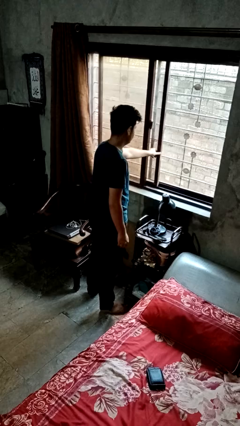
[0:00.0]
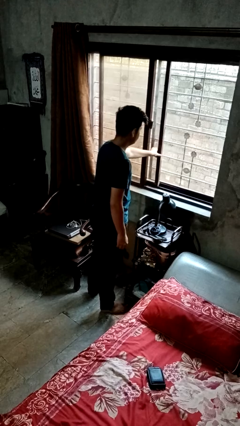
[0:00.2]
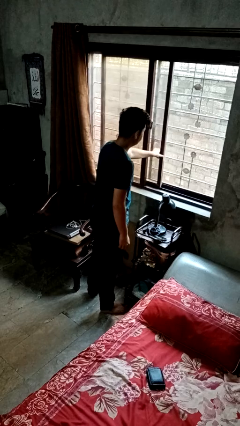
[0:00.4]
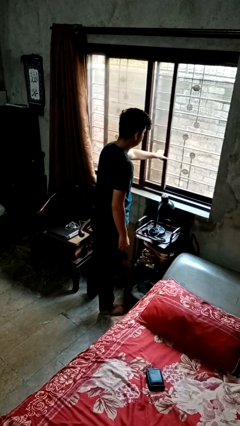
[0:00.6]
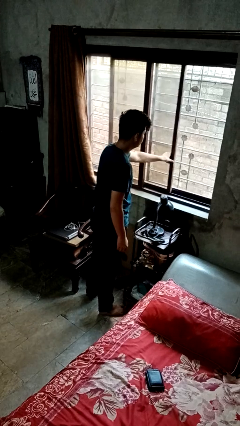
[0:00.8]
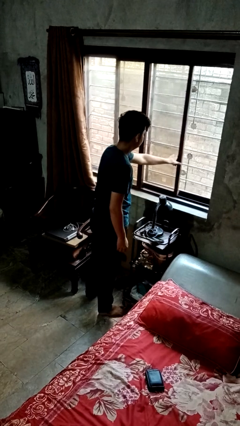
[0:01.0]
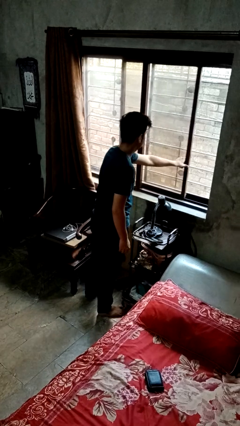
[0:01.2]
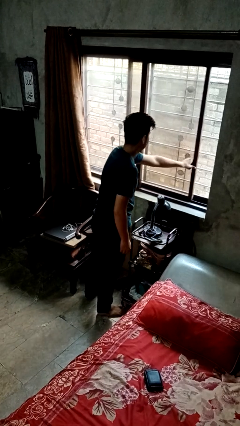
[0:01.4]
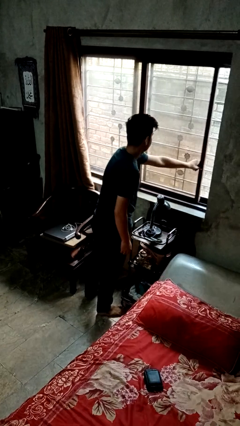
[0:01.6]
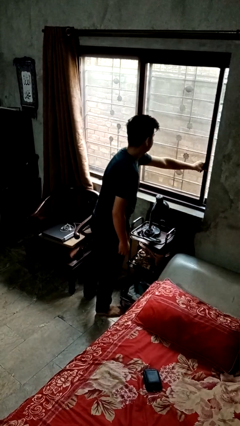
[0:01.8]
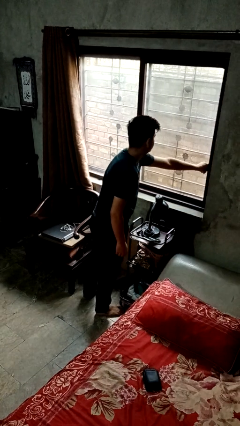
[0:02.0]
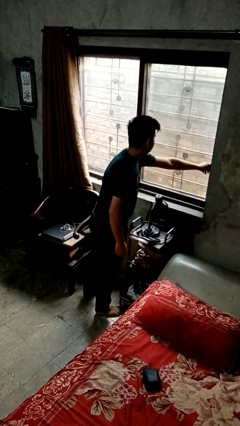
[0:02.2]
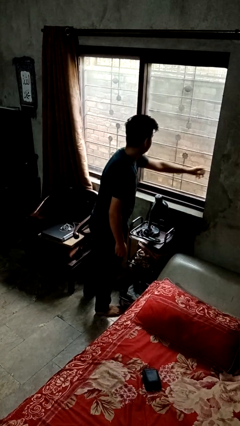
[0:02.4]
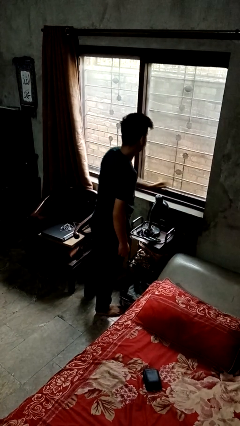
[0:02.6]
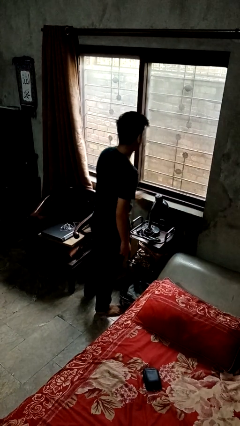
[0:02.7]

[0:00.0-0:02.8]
person closes home window

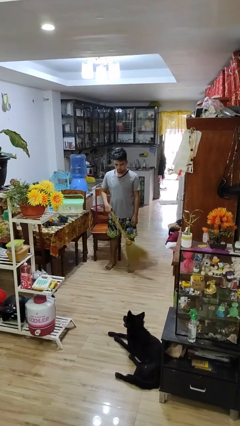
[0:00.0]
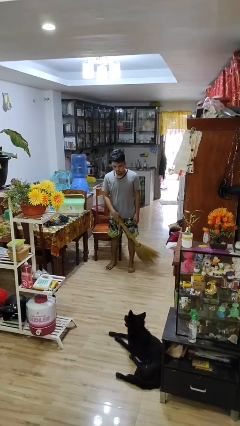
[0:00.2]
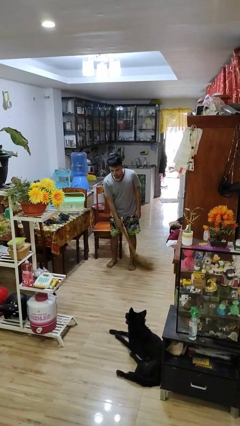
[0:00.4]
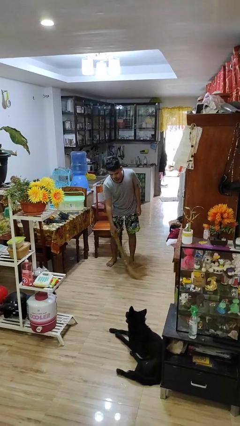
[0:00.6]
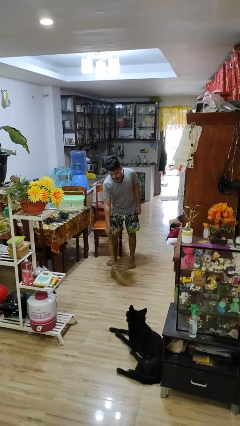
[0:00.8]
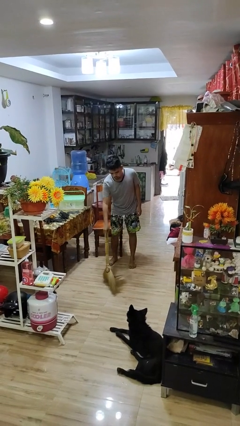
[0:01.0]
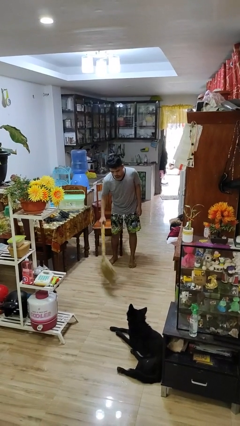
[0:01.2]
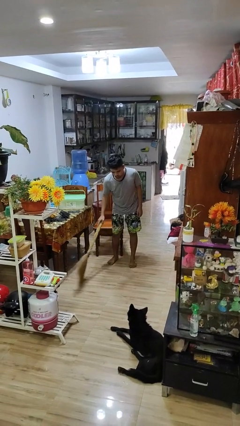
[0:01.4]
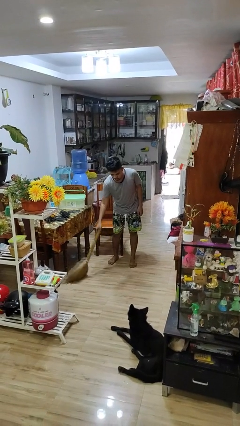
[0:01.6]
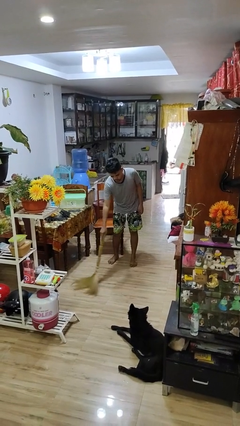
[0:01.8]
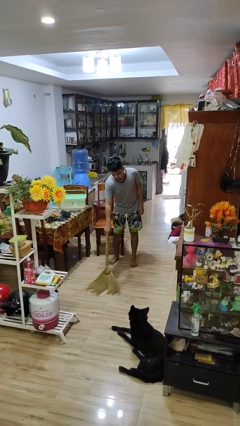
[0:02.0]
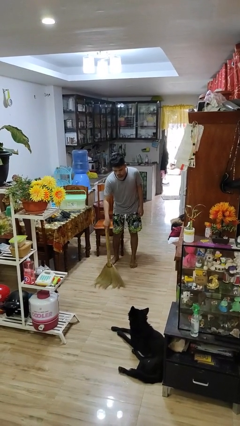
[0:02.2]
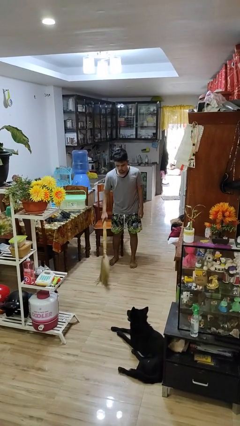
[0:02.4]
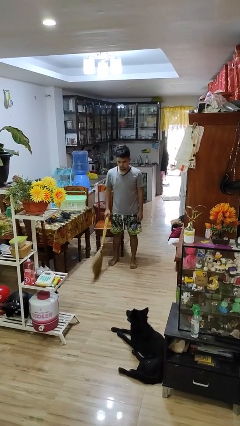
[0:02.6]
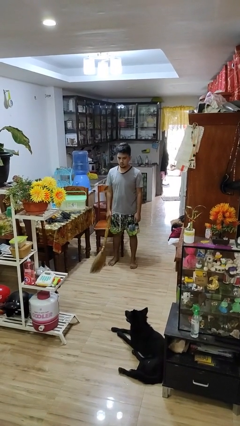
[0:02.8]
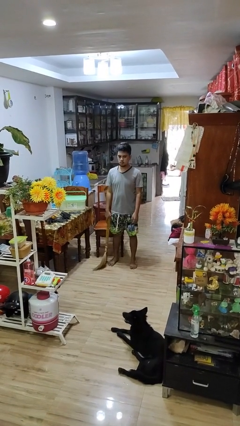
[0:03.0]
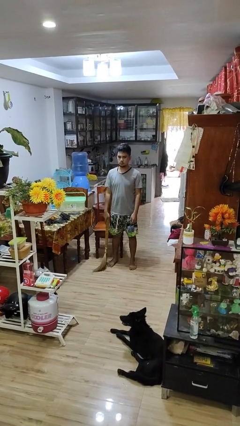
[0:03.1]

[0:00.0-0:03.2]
person sweeps floor

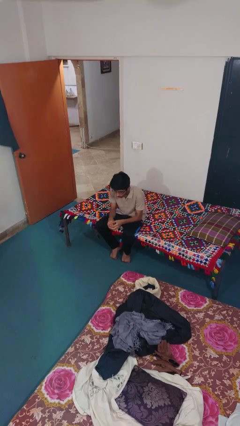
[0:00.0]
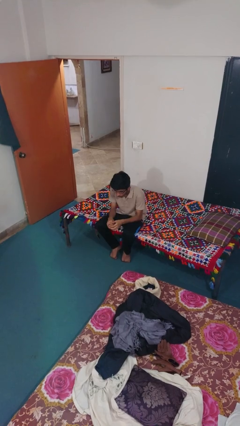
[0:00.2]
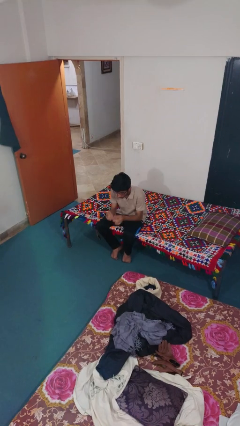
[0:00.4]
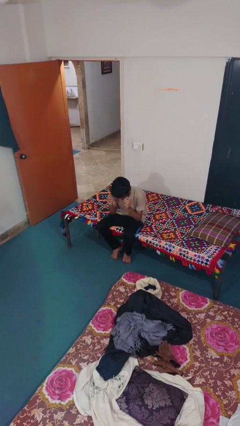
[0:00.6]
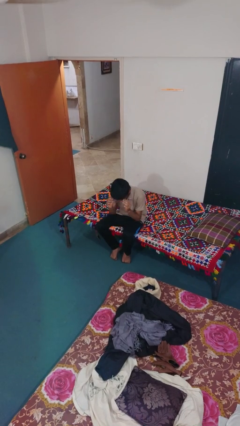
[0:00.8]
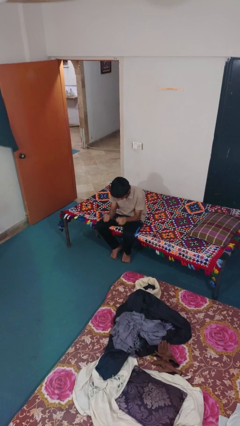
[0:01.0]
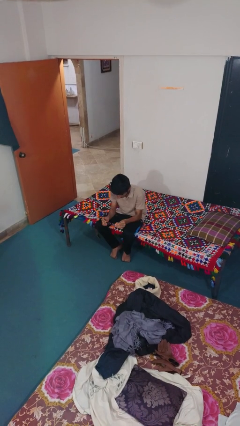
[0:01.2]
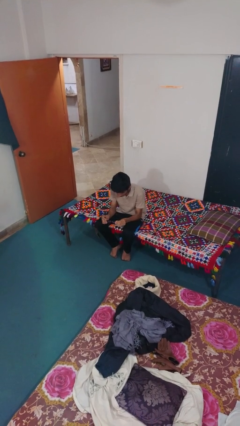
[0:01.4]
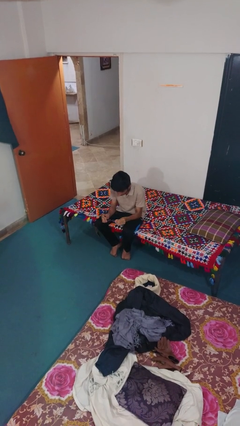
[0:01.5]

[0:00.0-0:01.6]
person takes off glasses

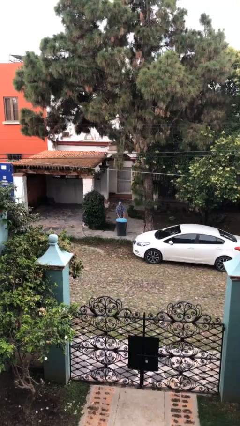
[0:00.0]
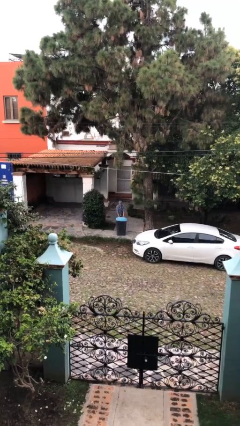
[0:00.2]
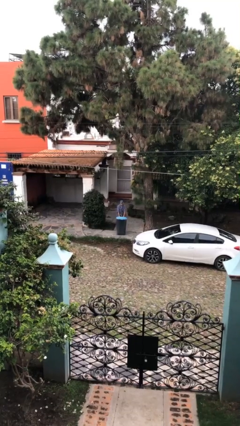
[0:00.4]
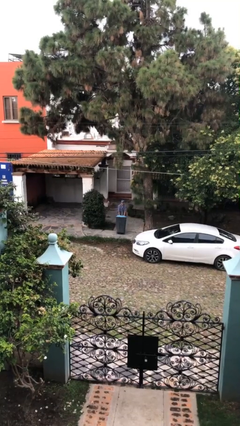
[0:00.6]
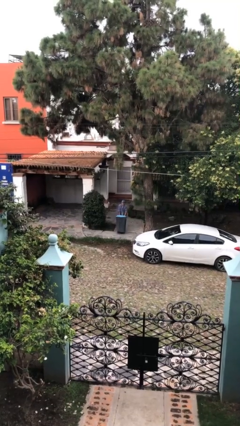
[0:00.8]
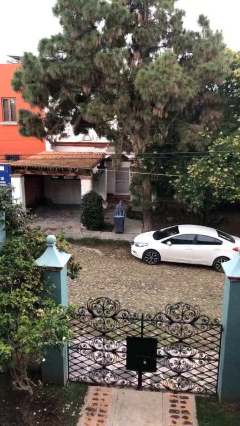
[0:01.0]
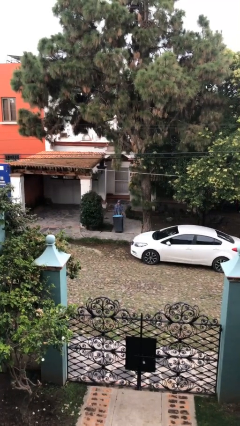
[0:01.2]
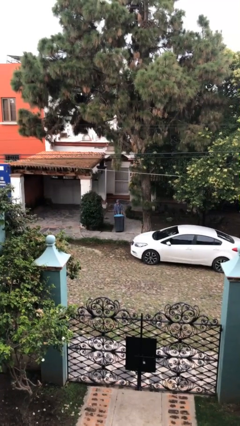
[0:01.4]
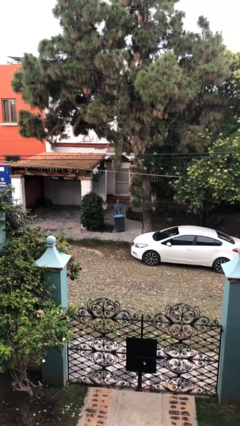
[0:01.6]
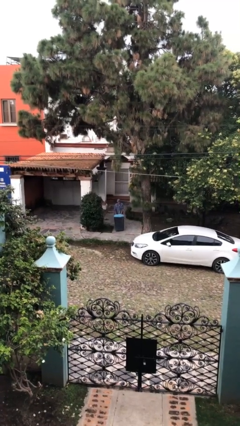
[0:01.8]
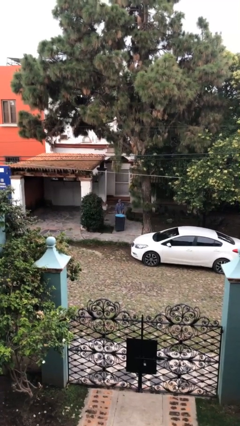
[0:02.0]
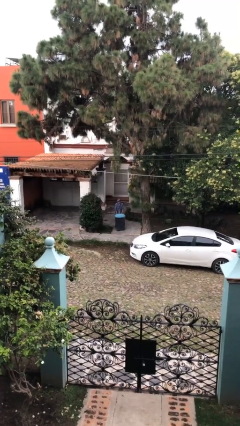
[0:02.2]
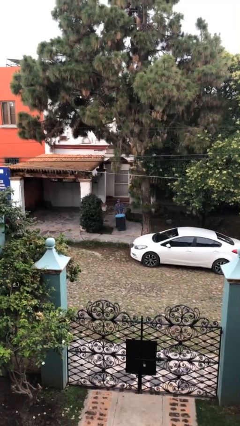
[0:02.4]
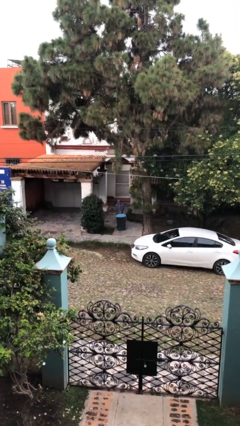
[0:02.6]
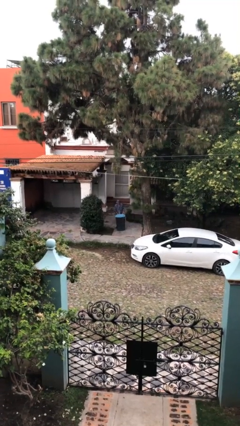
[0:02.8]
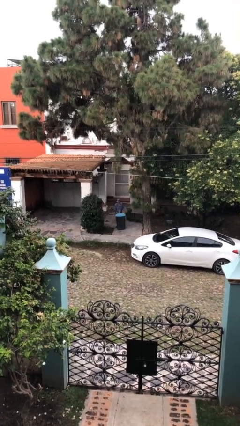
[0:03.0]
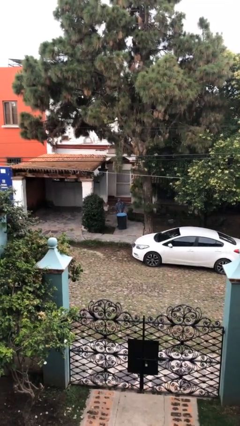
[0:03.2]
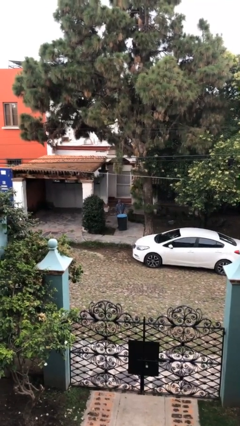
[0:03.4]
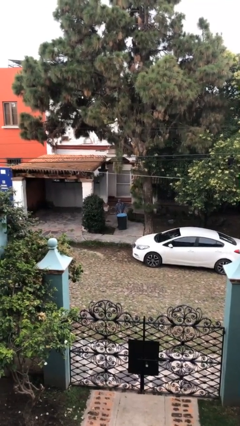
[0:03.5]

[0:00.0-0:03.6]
person pulls wheeled trashcan

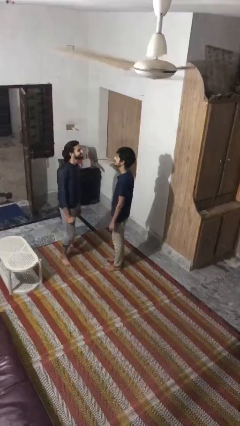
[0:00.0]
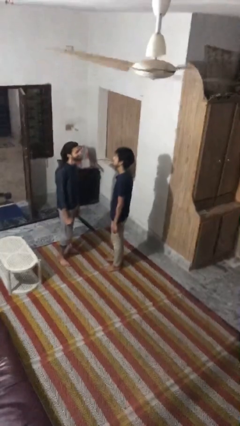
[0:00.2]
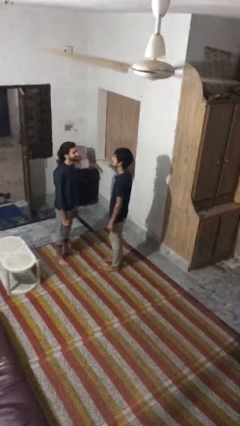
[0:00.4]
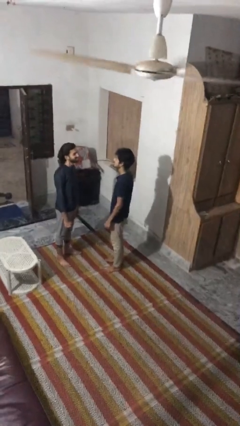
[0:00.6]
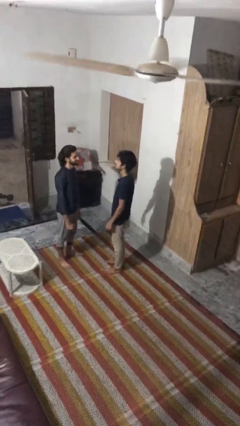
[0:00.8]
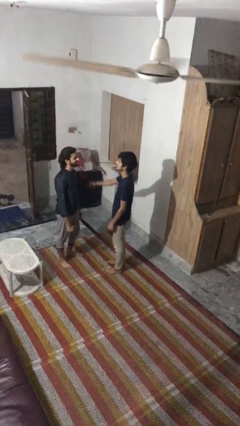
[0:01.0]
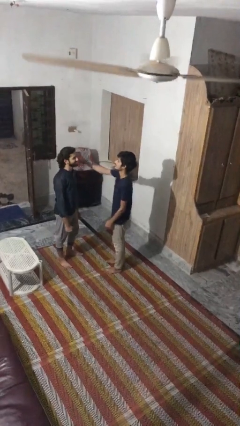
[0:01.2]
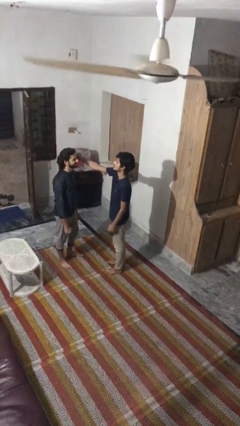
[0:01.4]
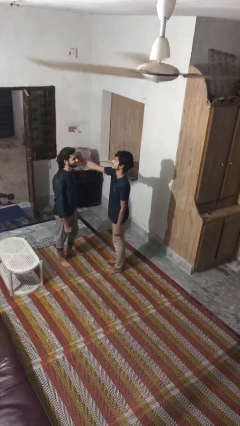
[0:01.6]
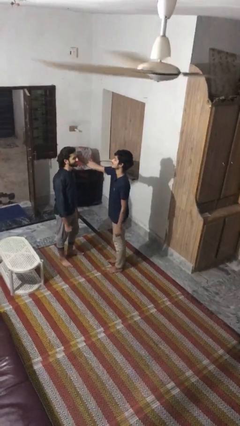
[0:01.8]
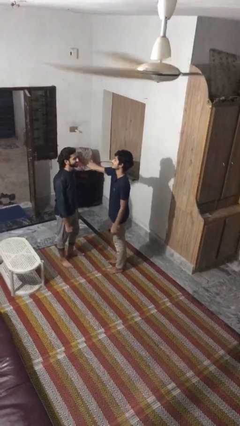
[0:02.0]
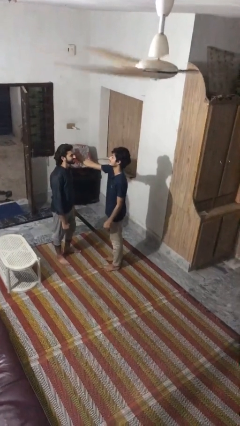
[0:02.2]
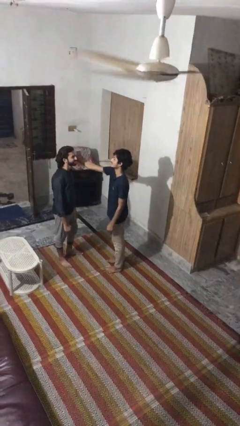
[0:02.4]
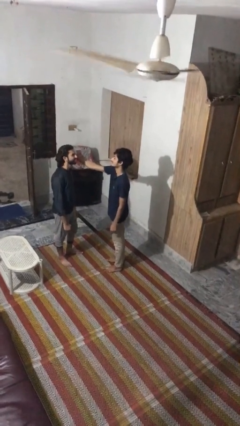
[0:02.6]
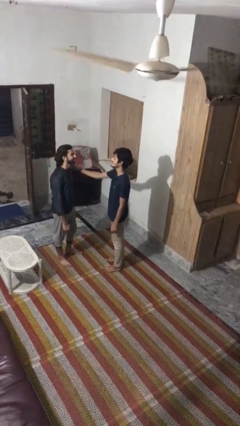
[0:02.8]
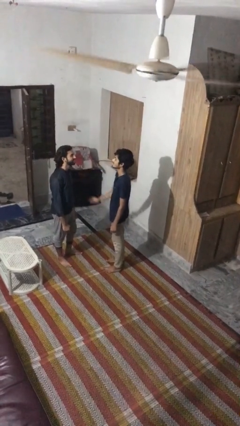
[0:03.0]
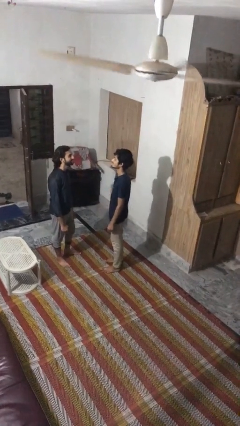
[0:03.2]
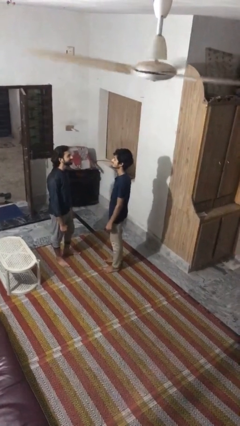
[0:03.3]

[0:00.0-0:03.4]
person grabs person by hair

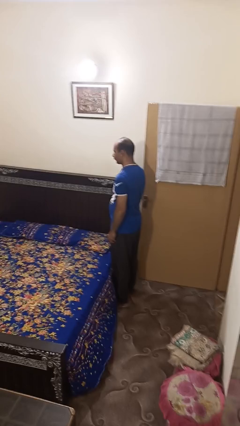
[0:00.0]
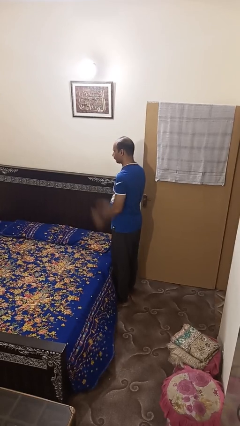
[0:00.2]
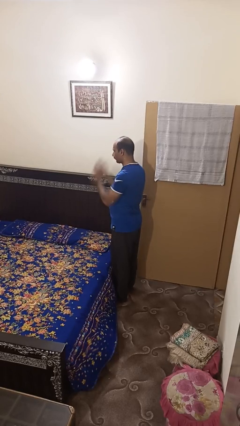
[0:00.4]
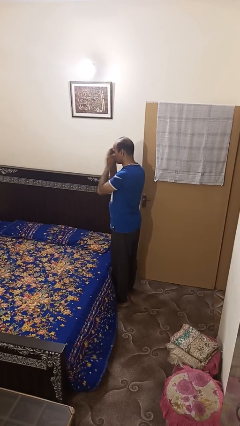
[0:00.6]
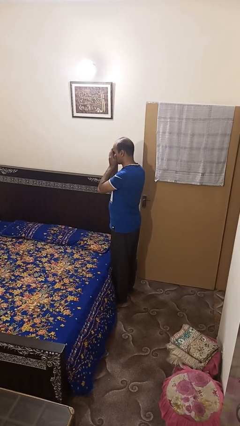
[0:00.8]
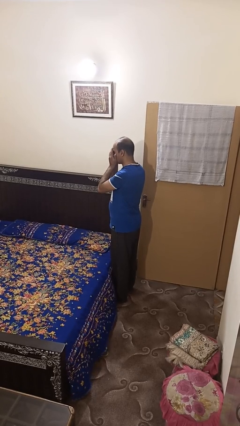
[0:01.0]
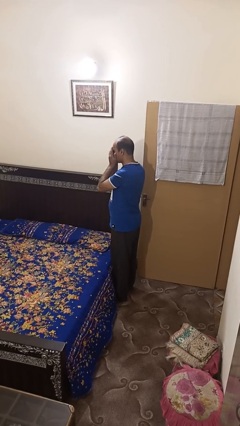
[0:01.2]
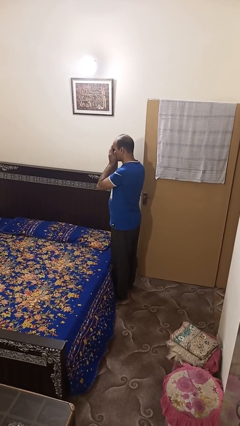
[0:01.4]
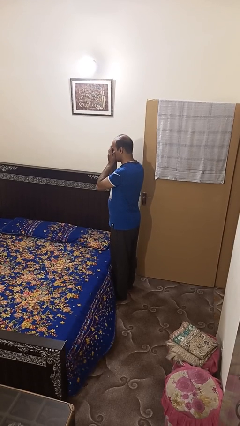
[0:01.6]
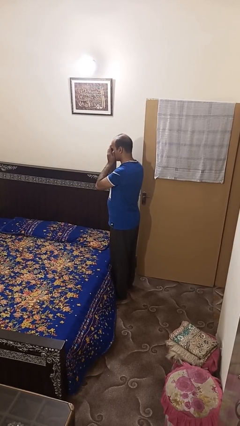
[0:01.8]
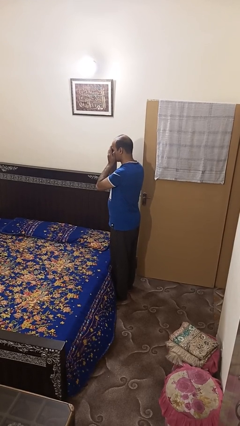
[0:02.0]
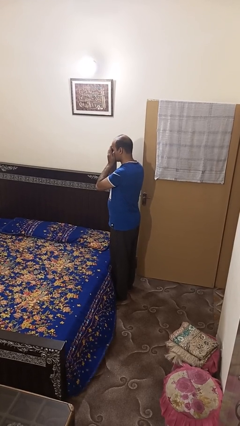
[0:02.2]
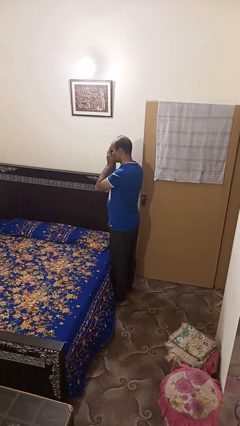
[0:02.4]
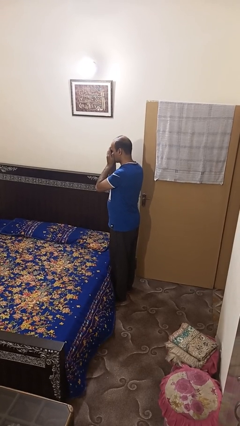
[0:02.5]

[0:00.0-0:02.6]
person covers face with hands
